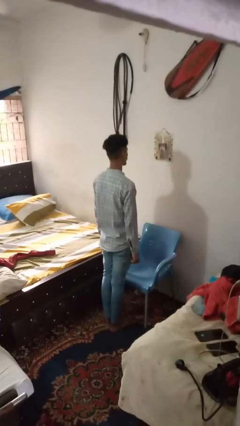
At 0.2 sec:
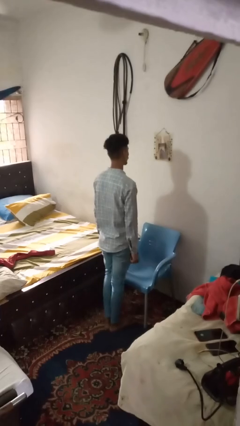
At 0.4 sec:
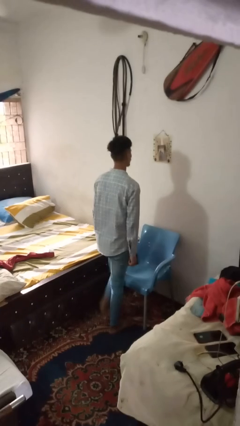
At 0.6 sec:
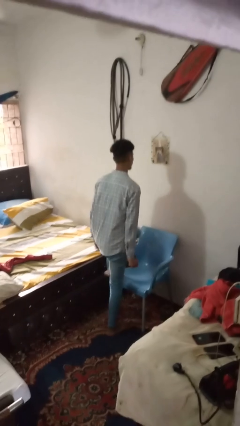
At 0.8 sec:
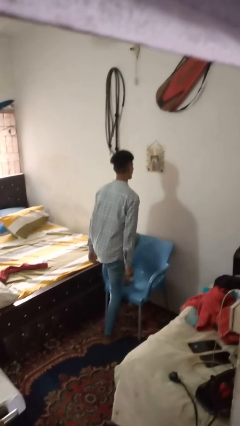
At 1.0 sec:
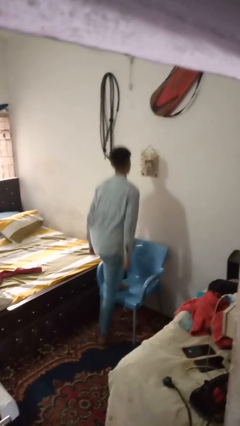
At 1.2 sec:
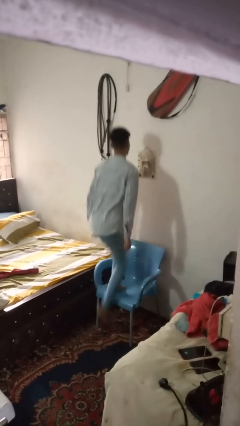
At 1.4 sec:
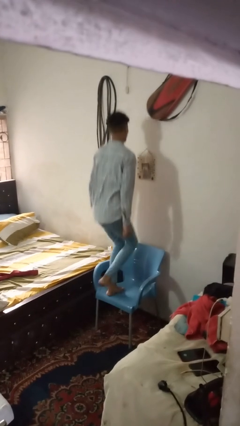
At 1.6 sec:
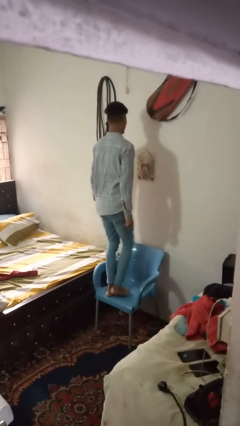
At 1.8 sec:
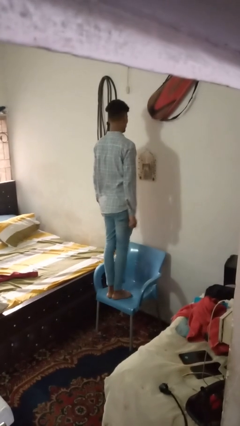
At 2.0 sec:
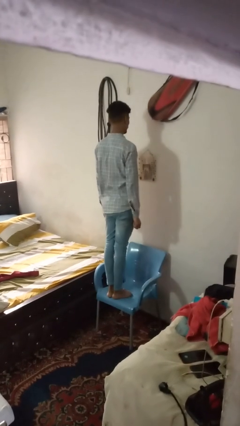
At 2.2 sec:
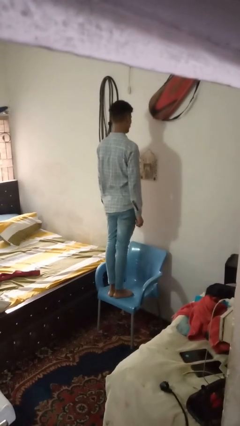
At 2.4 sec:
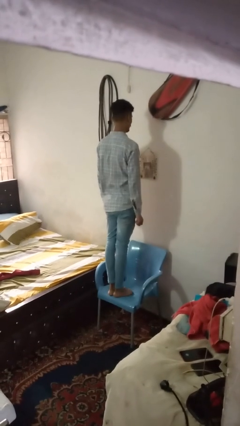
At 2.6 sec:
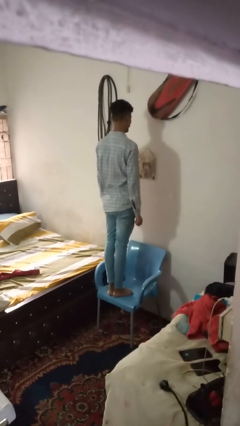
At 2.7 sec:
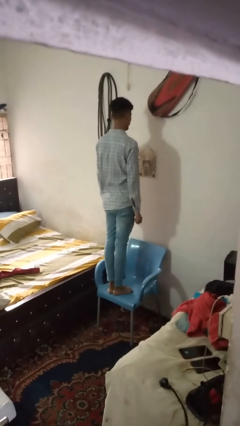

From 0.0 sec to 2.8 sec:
person climbs on chair

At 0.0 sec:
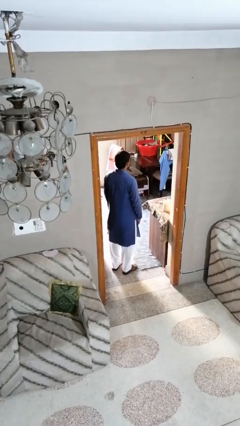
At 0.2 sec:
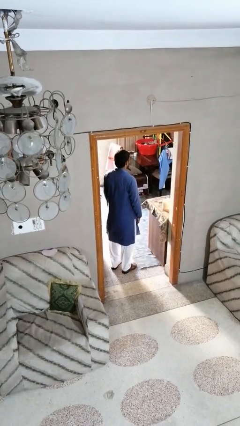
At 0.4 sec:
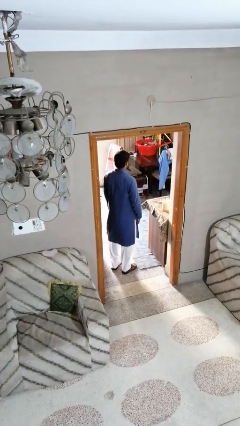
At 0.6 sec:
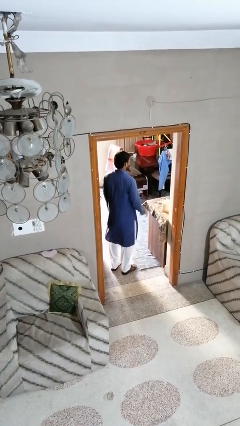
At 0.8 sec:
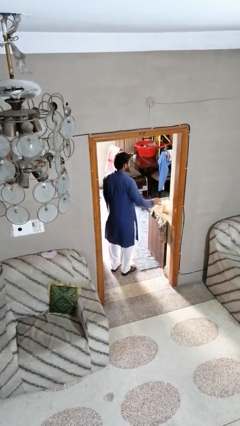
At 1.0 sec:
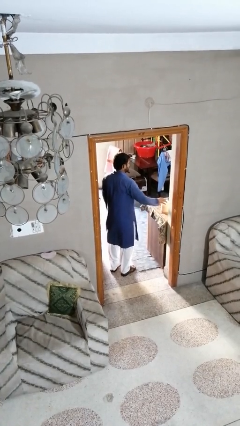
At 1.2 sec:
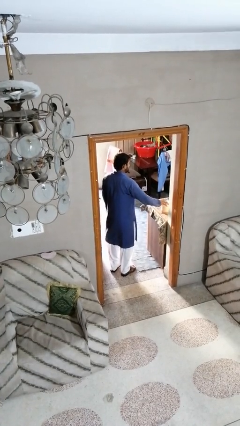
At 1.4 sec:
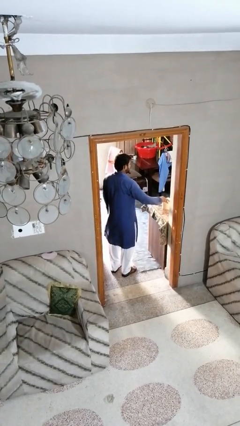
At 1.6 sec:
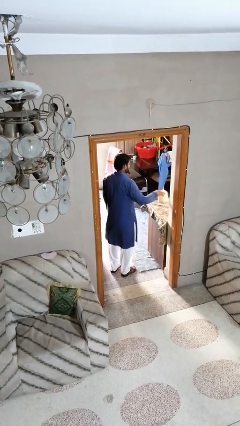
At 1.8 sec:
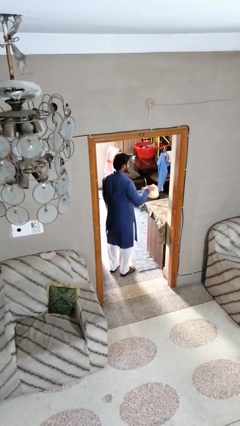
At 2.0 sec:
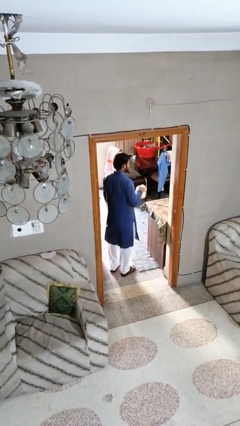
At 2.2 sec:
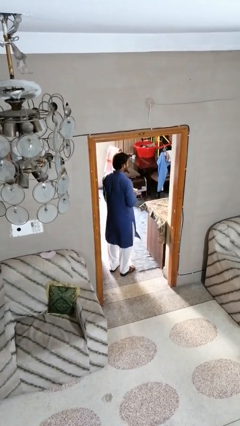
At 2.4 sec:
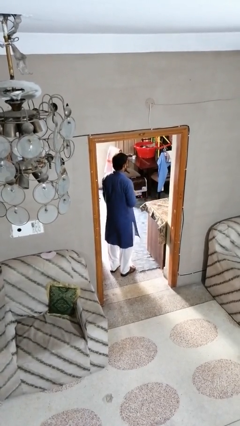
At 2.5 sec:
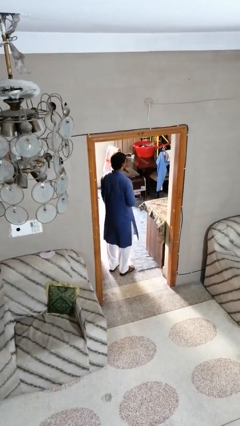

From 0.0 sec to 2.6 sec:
person picks up object from countertop

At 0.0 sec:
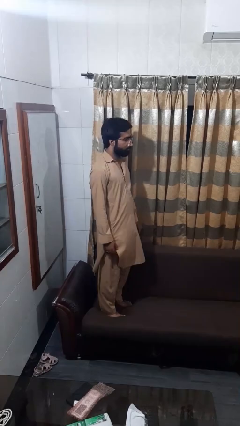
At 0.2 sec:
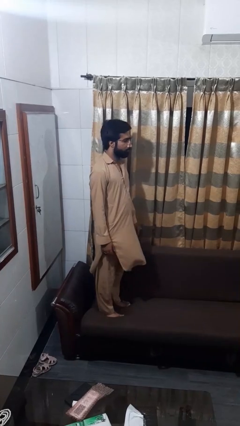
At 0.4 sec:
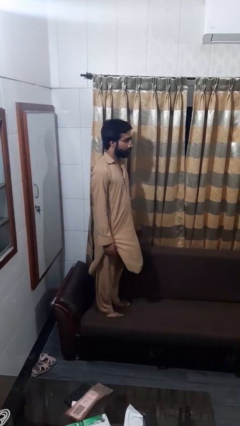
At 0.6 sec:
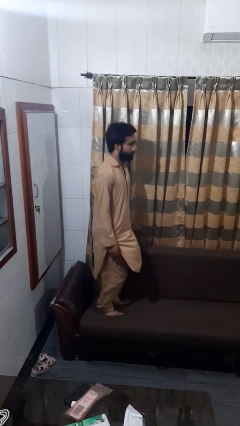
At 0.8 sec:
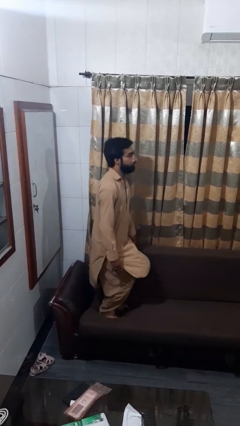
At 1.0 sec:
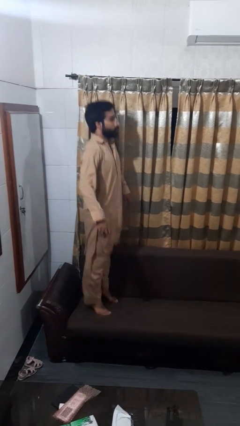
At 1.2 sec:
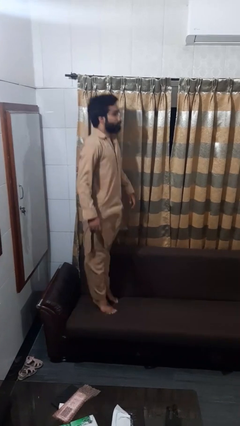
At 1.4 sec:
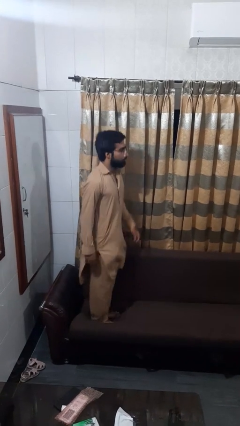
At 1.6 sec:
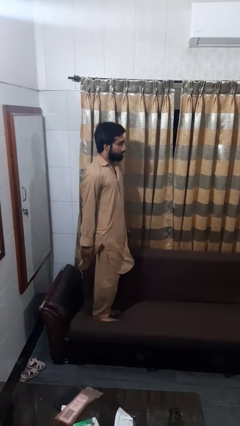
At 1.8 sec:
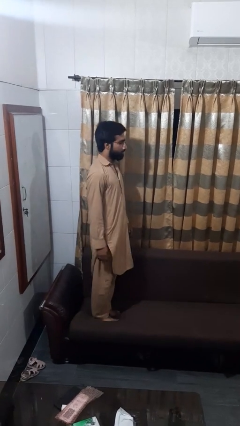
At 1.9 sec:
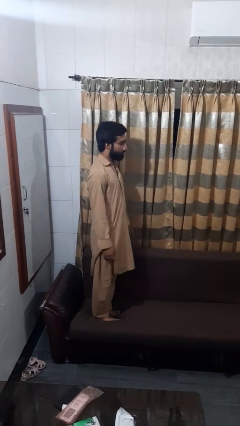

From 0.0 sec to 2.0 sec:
person jumps on couch

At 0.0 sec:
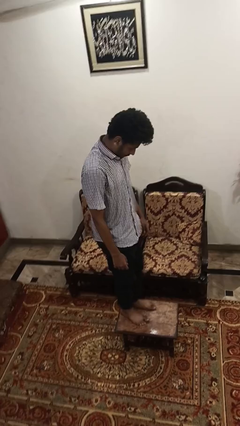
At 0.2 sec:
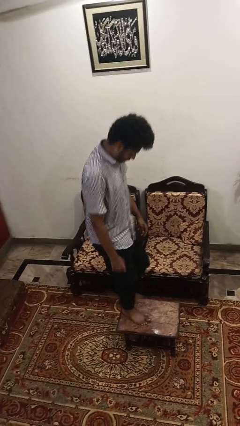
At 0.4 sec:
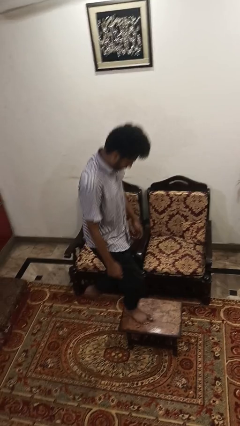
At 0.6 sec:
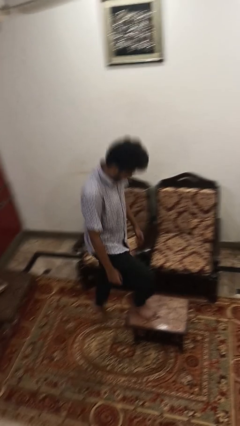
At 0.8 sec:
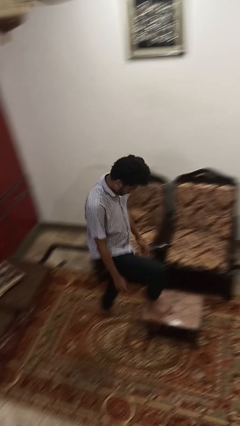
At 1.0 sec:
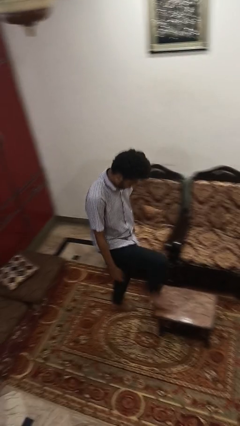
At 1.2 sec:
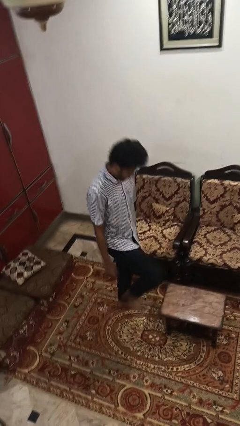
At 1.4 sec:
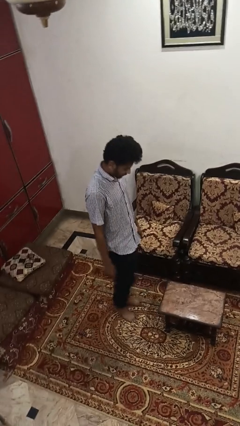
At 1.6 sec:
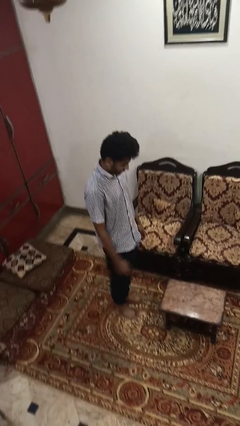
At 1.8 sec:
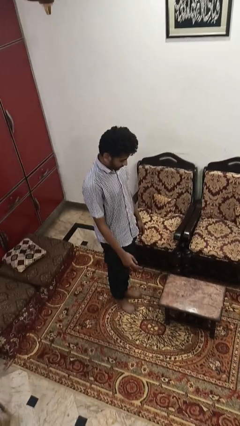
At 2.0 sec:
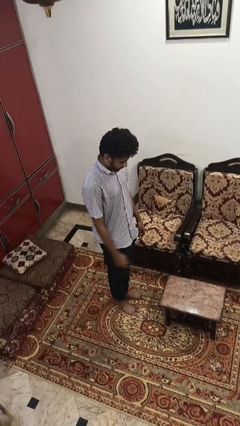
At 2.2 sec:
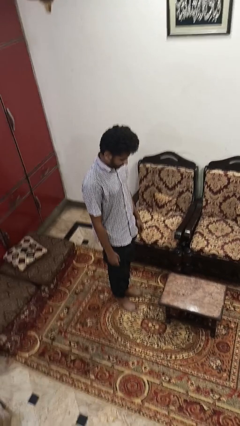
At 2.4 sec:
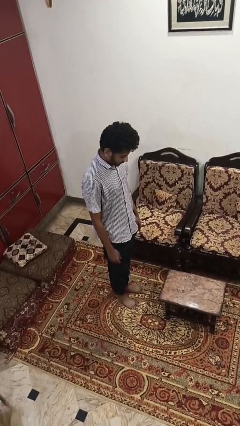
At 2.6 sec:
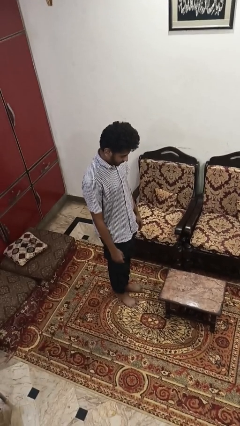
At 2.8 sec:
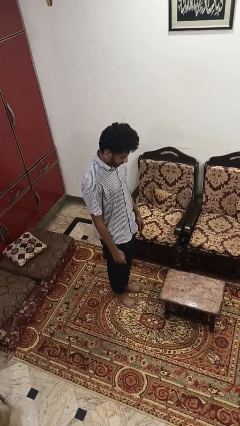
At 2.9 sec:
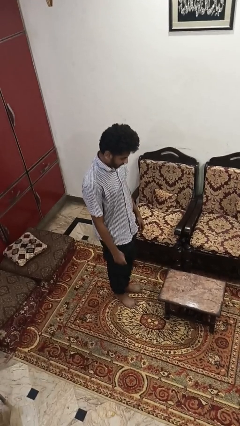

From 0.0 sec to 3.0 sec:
person climbs off table

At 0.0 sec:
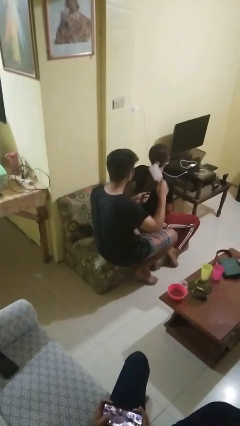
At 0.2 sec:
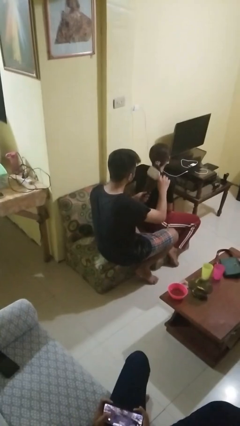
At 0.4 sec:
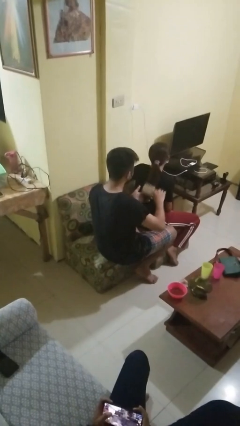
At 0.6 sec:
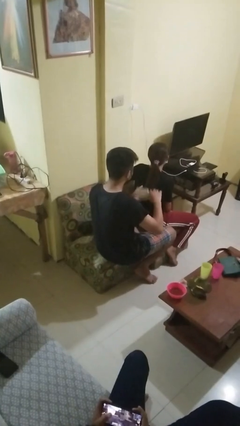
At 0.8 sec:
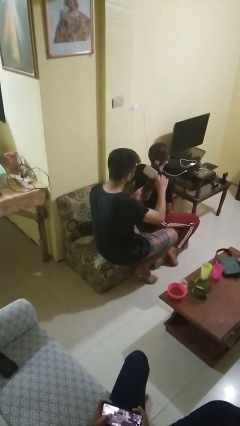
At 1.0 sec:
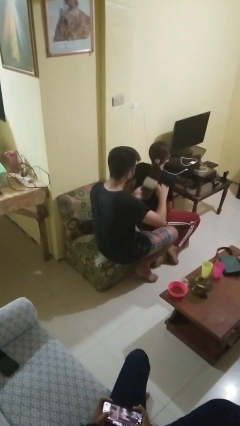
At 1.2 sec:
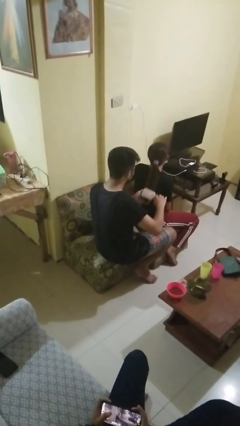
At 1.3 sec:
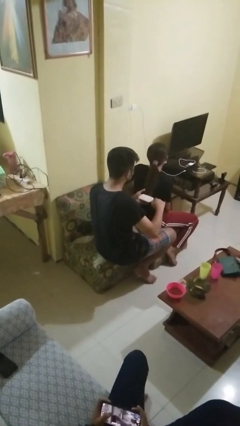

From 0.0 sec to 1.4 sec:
person brushes hair of person

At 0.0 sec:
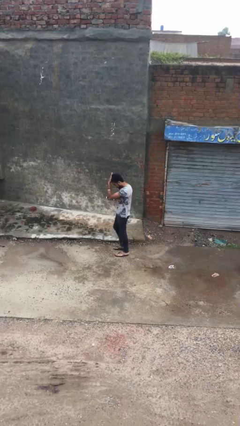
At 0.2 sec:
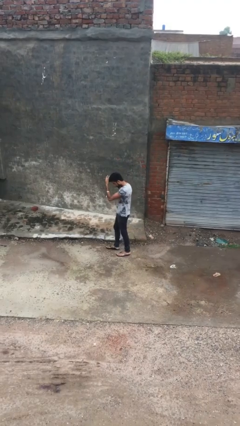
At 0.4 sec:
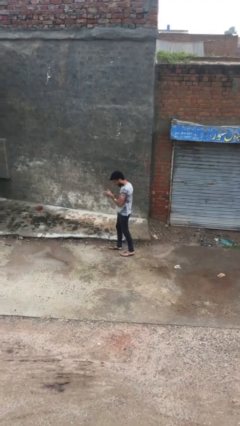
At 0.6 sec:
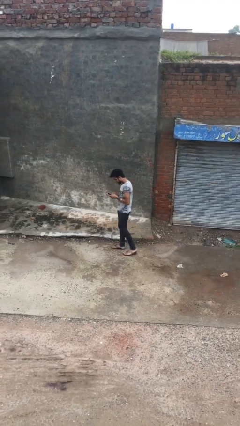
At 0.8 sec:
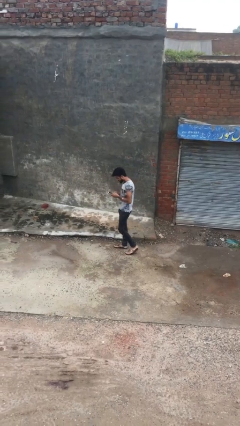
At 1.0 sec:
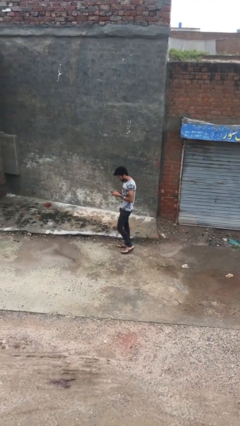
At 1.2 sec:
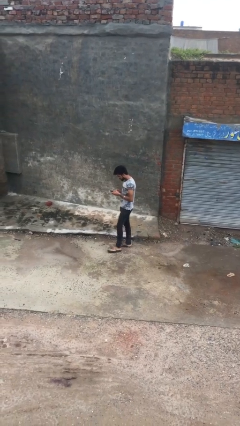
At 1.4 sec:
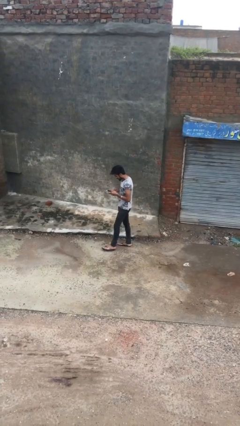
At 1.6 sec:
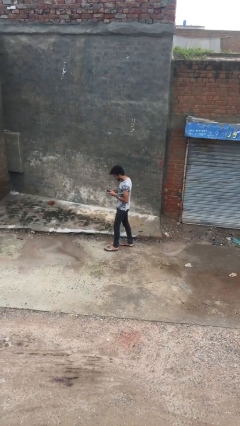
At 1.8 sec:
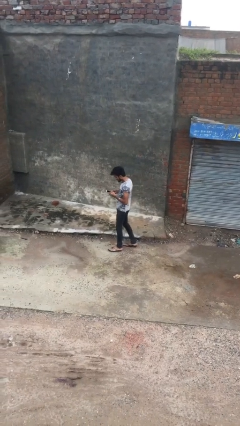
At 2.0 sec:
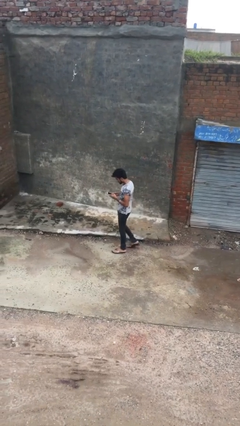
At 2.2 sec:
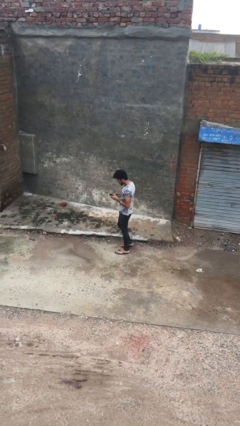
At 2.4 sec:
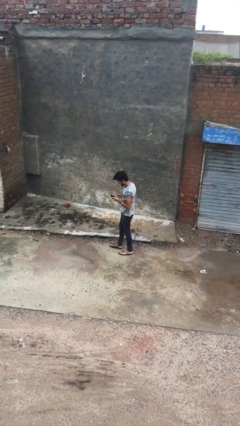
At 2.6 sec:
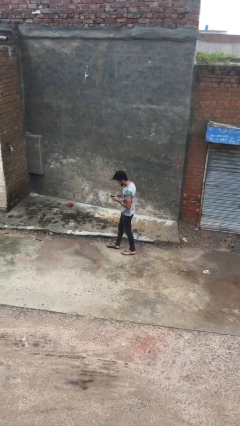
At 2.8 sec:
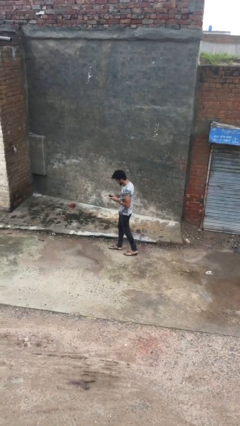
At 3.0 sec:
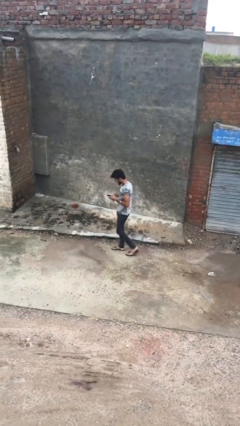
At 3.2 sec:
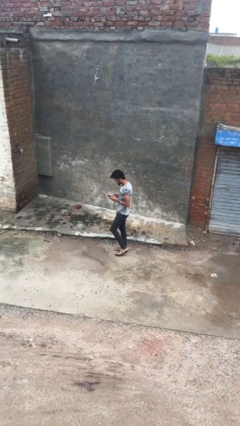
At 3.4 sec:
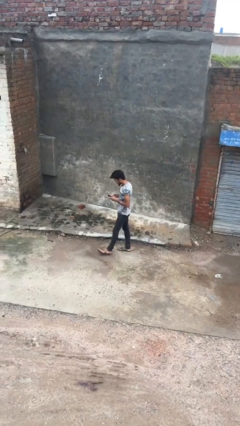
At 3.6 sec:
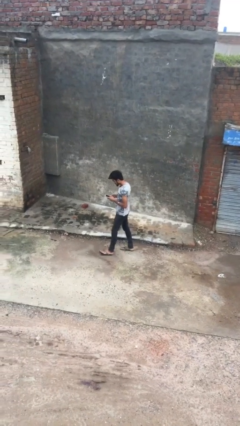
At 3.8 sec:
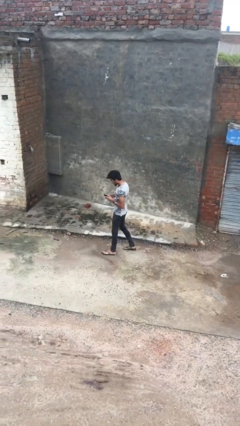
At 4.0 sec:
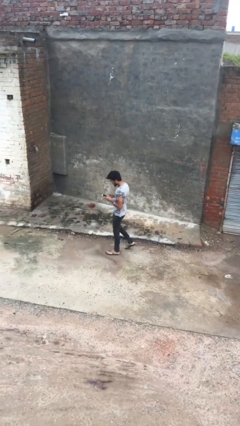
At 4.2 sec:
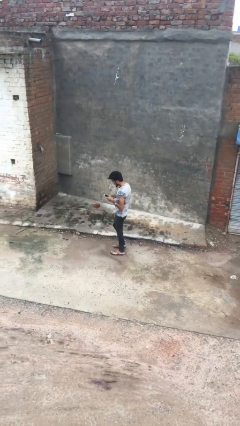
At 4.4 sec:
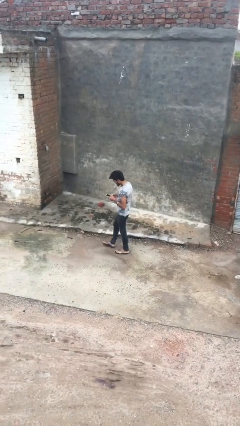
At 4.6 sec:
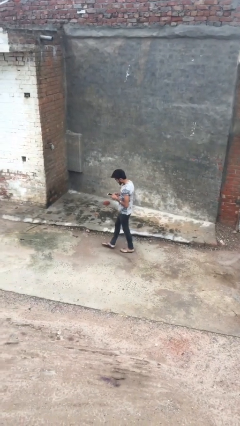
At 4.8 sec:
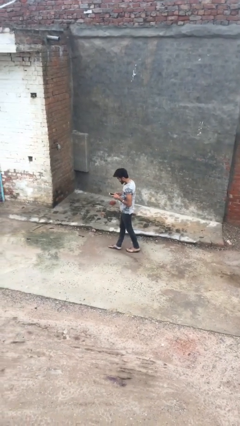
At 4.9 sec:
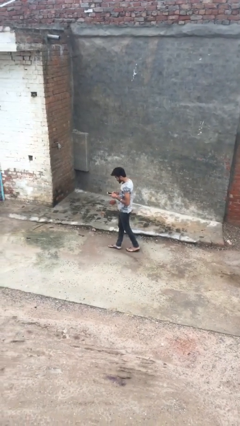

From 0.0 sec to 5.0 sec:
person texts on phone

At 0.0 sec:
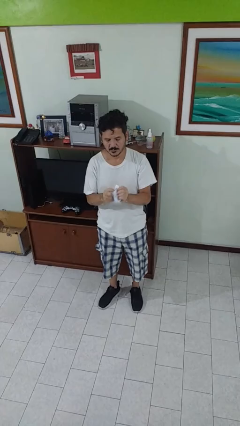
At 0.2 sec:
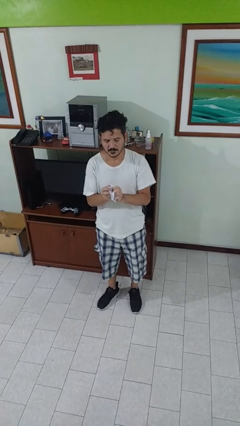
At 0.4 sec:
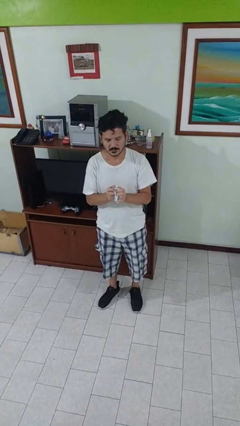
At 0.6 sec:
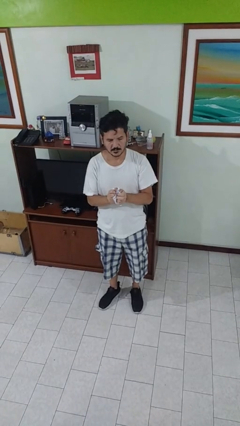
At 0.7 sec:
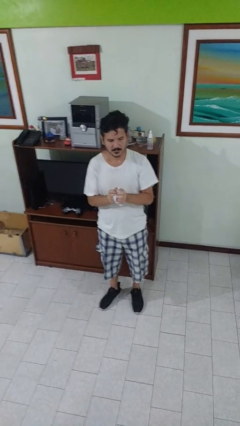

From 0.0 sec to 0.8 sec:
person crumples paper
